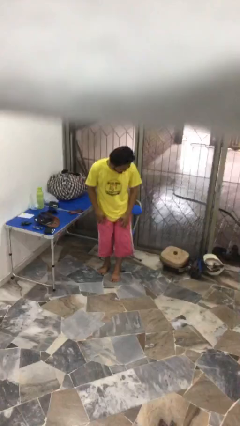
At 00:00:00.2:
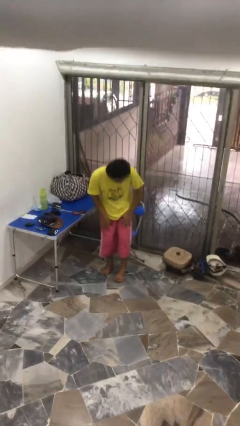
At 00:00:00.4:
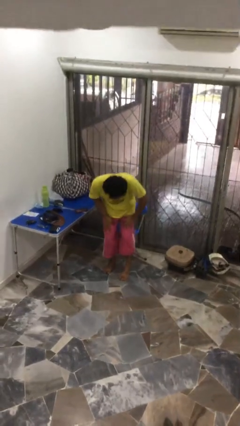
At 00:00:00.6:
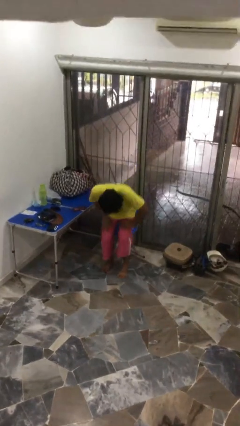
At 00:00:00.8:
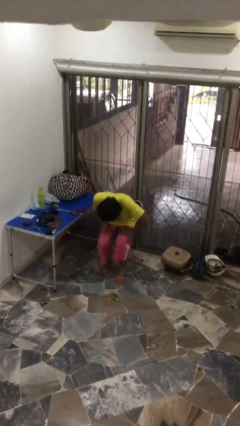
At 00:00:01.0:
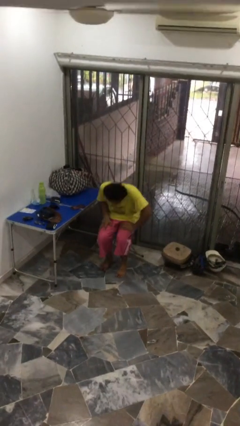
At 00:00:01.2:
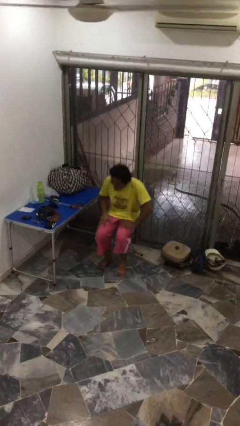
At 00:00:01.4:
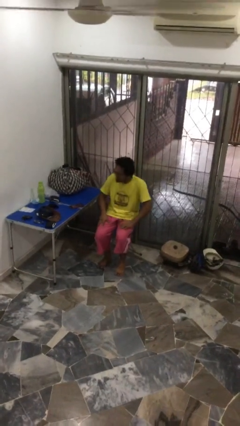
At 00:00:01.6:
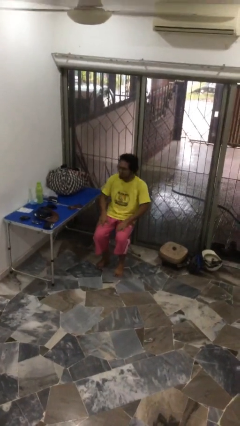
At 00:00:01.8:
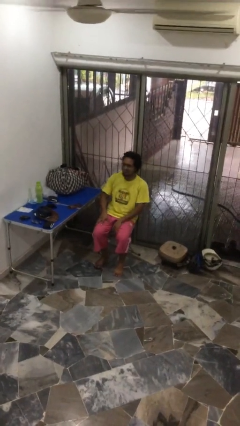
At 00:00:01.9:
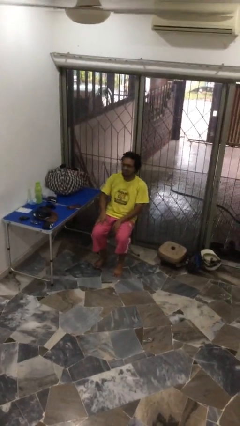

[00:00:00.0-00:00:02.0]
person sits down

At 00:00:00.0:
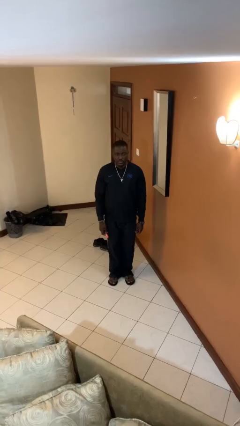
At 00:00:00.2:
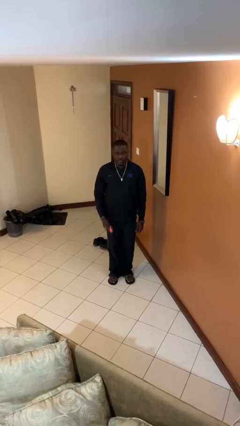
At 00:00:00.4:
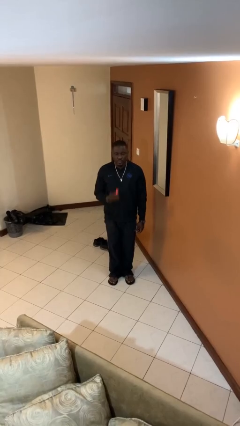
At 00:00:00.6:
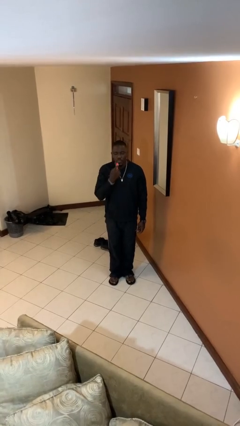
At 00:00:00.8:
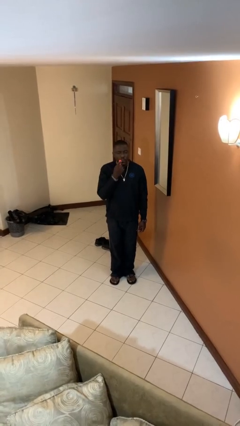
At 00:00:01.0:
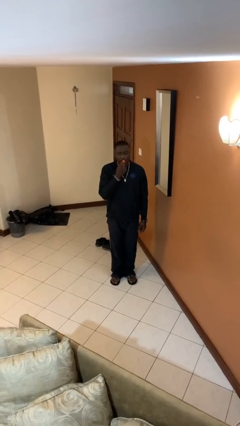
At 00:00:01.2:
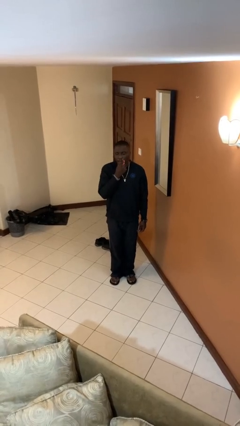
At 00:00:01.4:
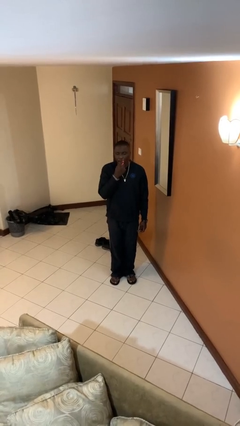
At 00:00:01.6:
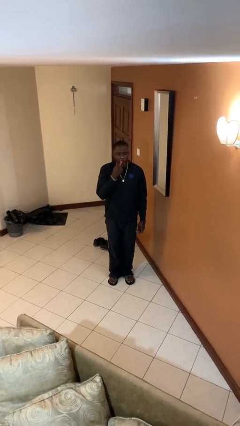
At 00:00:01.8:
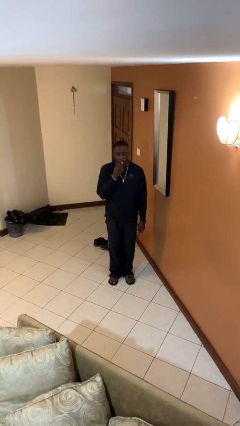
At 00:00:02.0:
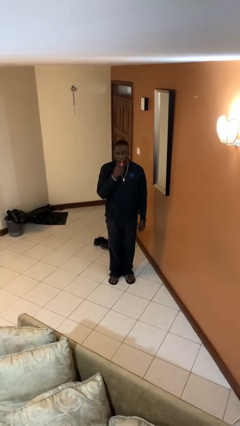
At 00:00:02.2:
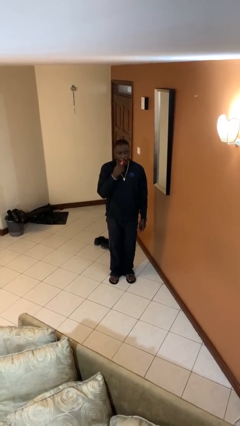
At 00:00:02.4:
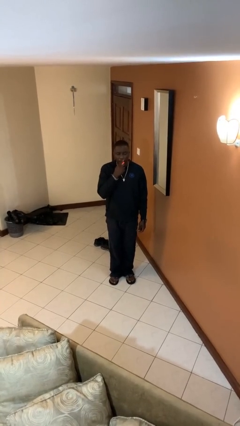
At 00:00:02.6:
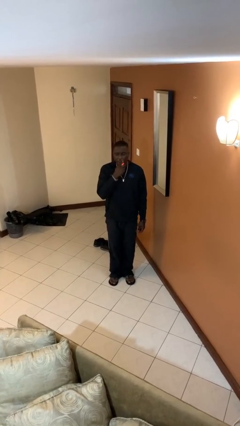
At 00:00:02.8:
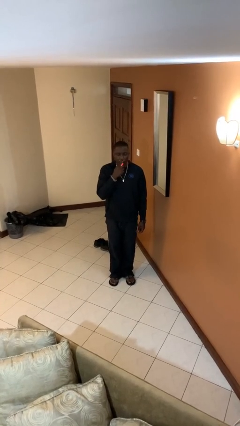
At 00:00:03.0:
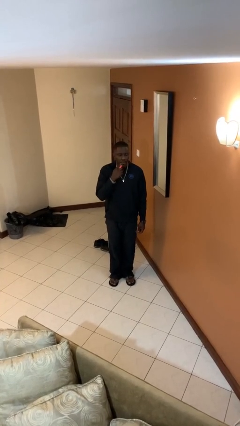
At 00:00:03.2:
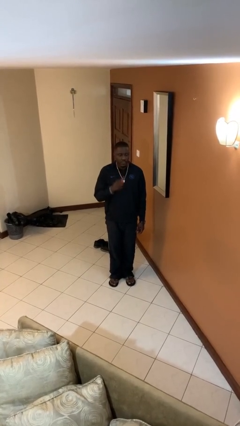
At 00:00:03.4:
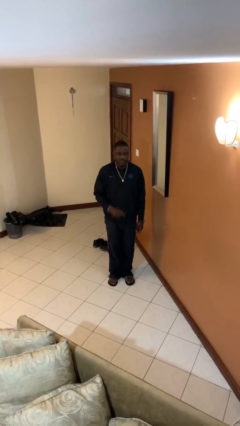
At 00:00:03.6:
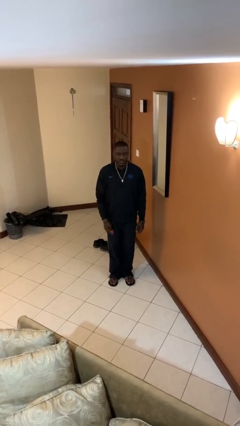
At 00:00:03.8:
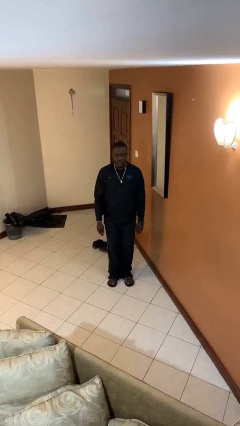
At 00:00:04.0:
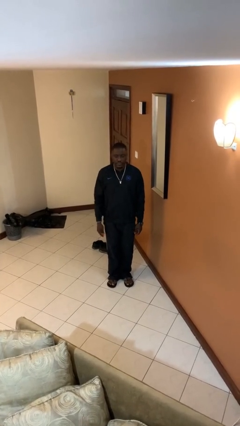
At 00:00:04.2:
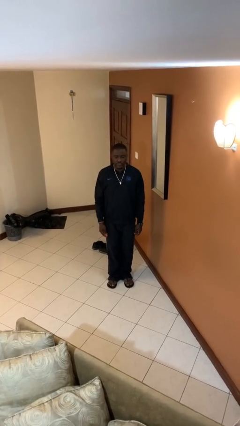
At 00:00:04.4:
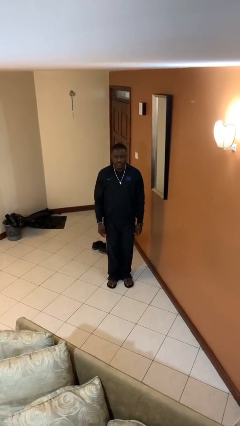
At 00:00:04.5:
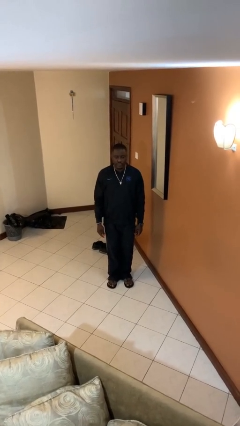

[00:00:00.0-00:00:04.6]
person applies lip makeup

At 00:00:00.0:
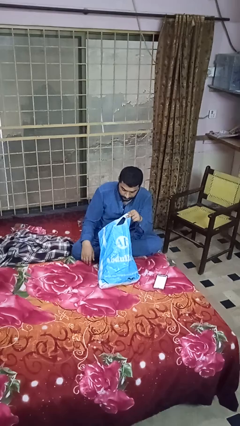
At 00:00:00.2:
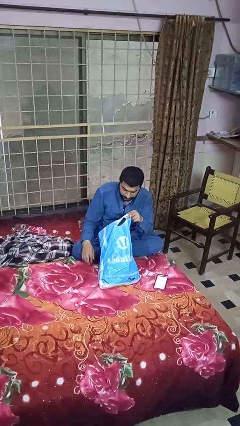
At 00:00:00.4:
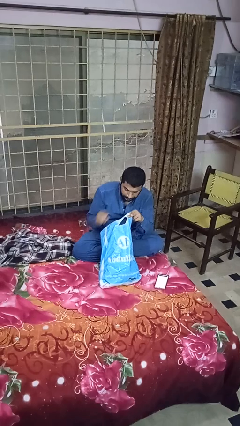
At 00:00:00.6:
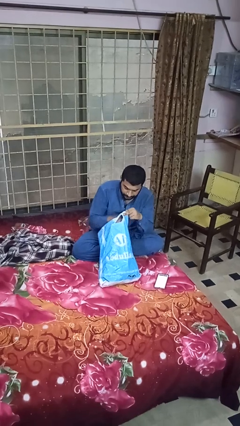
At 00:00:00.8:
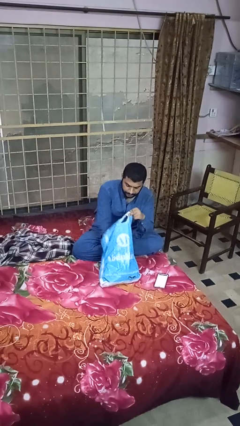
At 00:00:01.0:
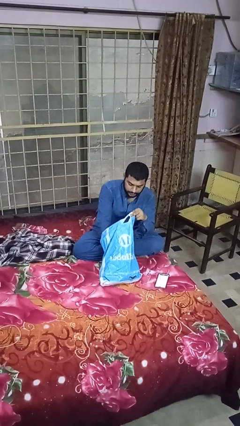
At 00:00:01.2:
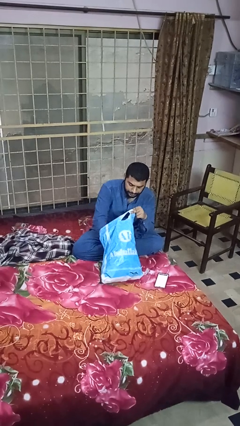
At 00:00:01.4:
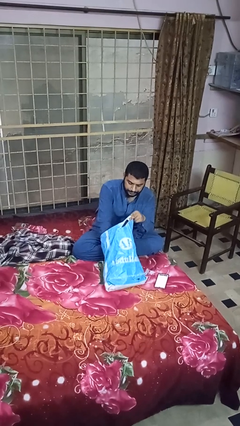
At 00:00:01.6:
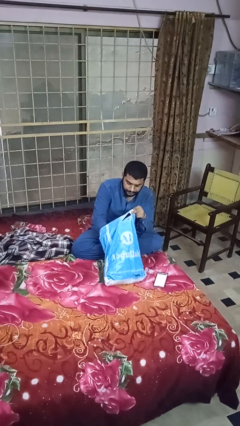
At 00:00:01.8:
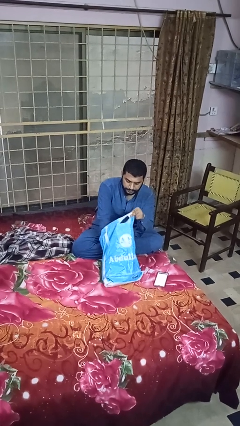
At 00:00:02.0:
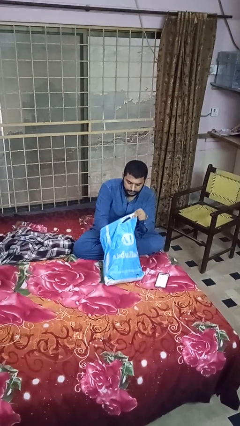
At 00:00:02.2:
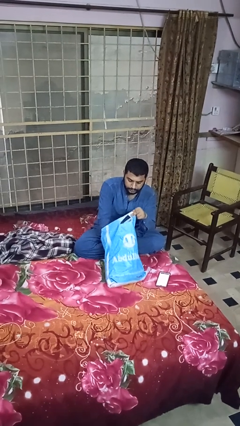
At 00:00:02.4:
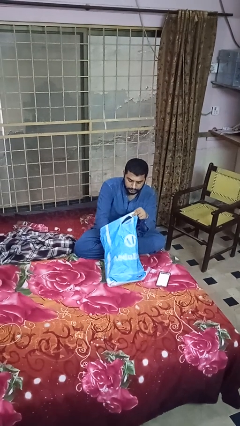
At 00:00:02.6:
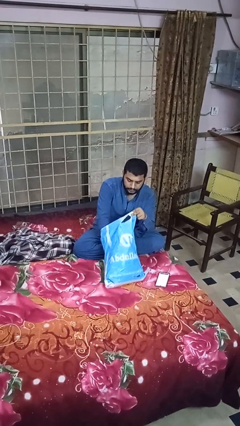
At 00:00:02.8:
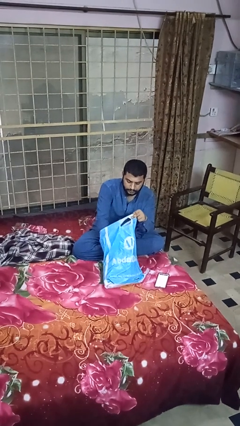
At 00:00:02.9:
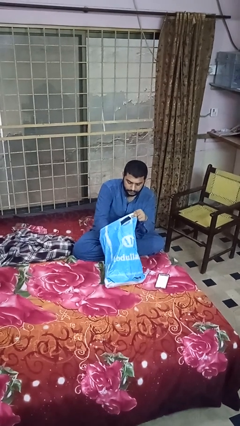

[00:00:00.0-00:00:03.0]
person searches in bag

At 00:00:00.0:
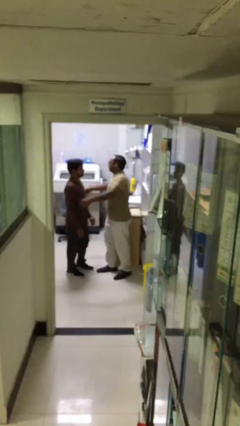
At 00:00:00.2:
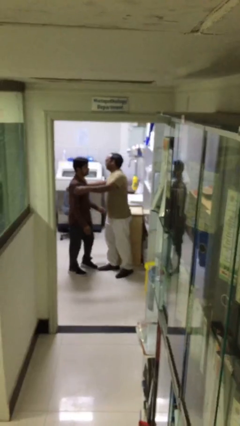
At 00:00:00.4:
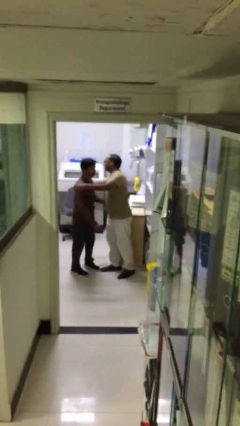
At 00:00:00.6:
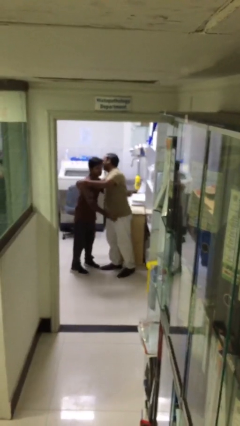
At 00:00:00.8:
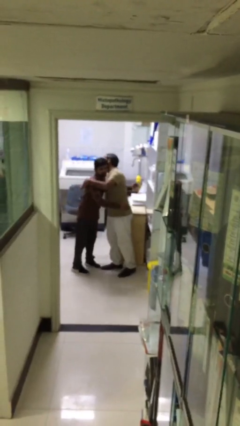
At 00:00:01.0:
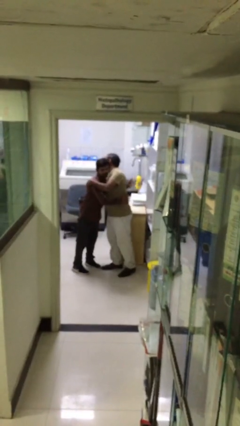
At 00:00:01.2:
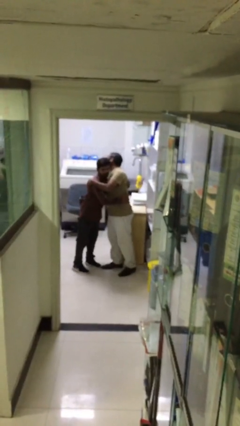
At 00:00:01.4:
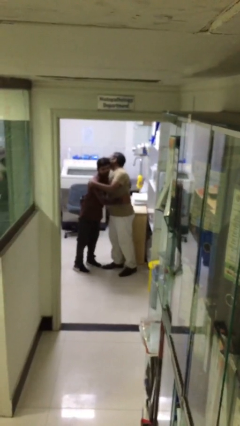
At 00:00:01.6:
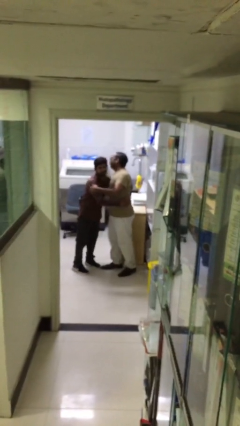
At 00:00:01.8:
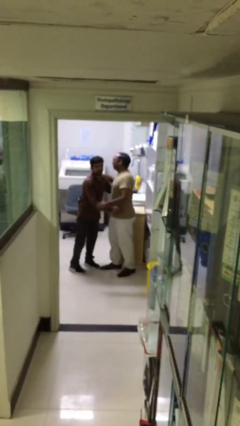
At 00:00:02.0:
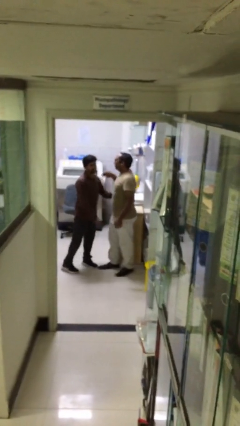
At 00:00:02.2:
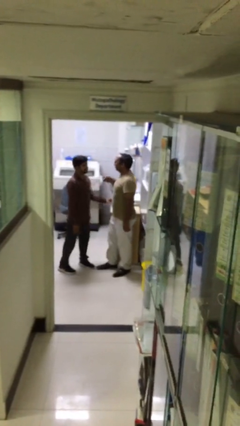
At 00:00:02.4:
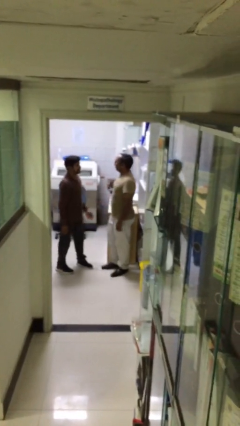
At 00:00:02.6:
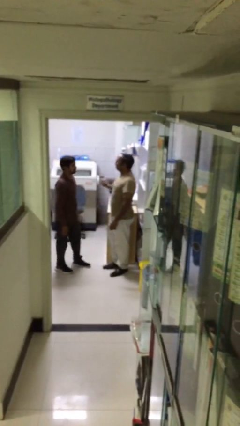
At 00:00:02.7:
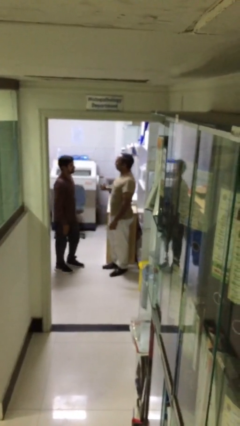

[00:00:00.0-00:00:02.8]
person embraces person

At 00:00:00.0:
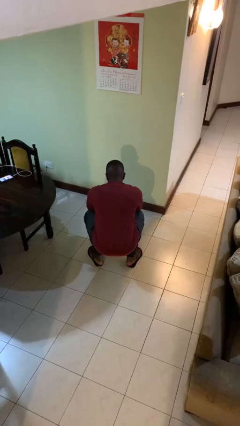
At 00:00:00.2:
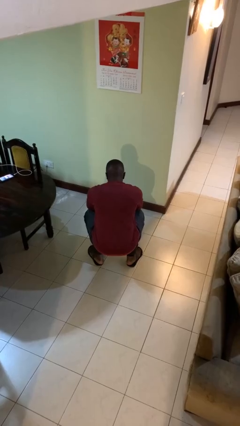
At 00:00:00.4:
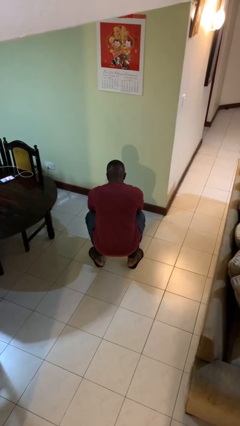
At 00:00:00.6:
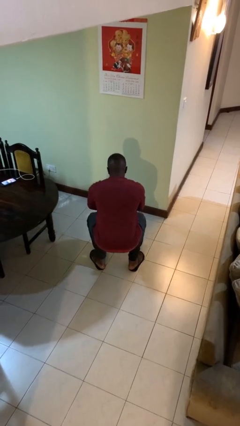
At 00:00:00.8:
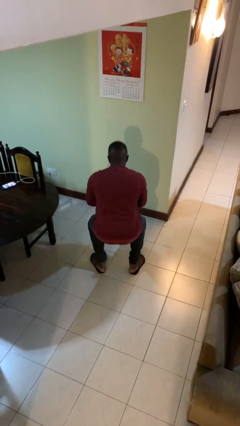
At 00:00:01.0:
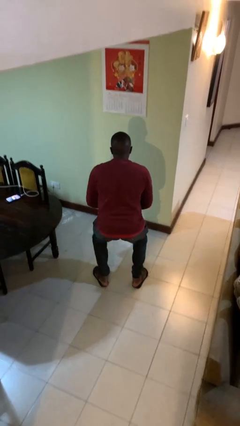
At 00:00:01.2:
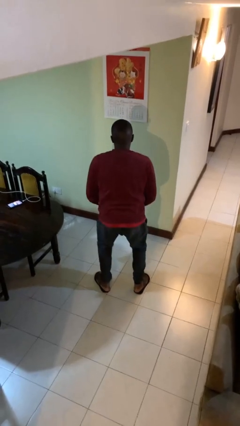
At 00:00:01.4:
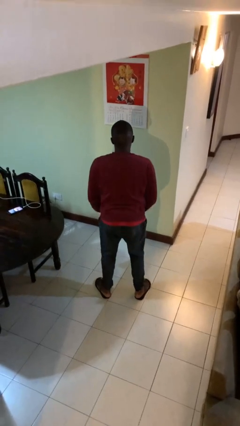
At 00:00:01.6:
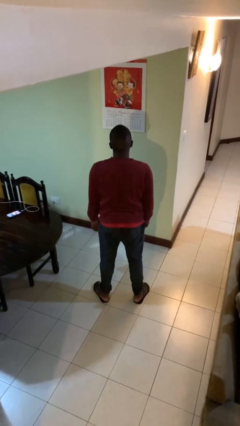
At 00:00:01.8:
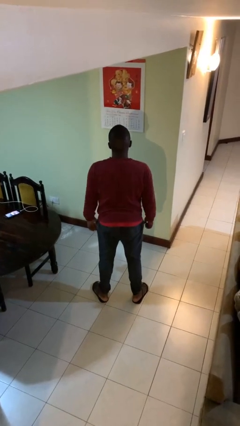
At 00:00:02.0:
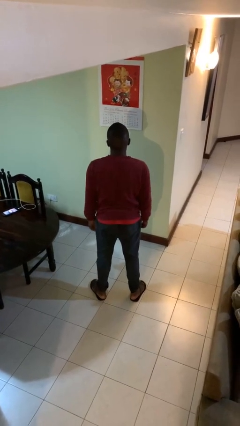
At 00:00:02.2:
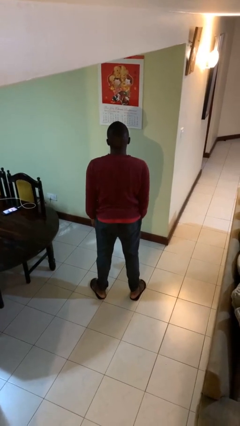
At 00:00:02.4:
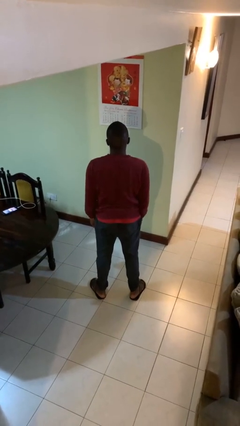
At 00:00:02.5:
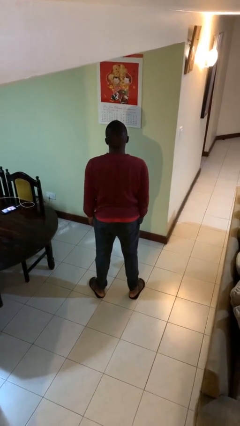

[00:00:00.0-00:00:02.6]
person stands up

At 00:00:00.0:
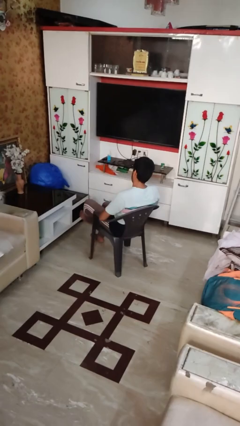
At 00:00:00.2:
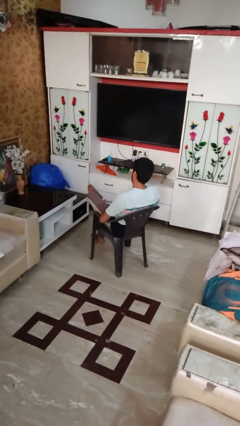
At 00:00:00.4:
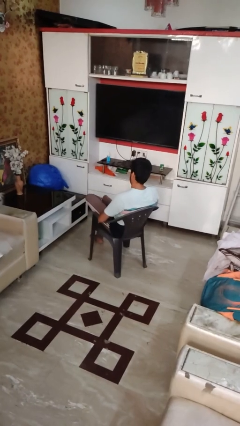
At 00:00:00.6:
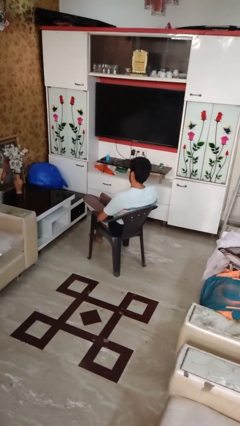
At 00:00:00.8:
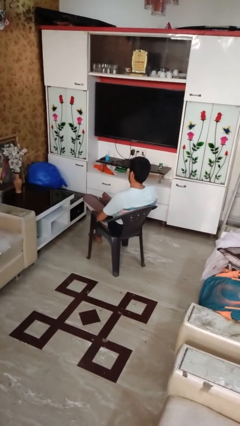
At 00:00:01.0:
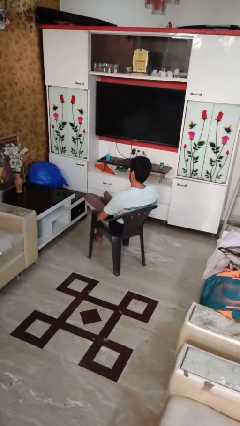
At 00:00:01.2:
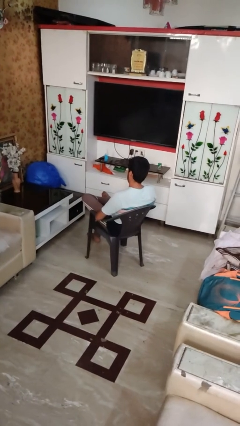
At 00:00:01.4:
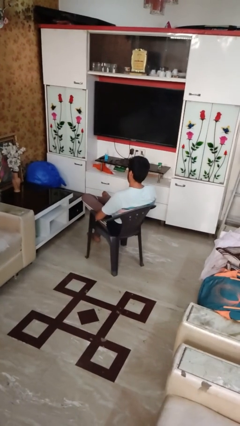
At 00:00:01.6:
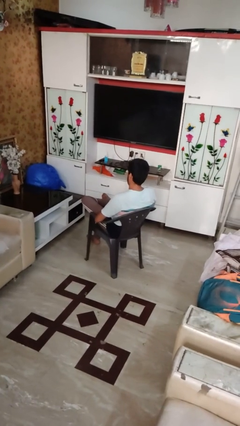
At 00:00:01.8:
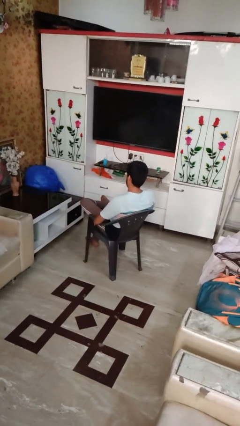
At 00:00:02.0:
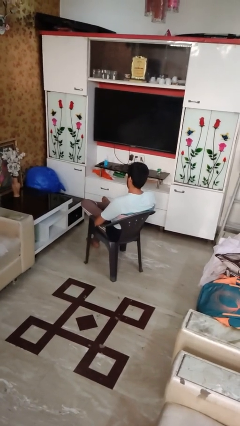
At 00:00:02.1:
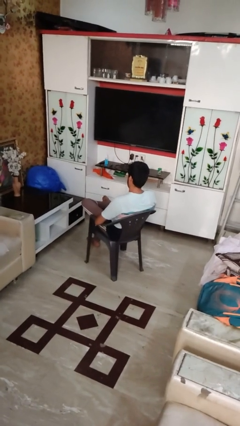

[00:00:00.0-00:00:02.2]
person crosses legs
